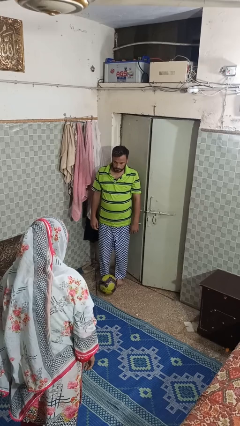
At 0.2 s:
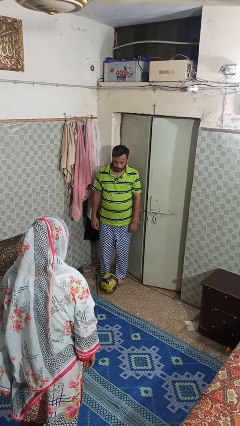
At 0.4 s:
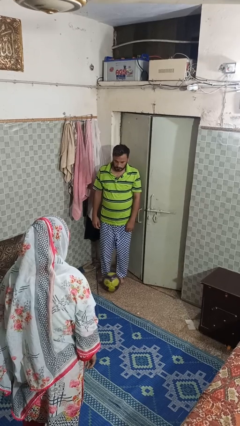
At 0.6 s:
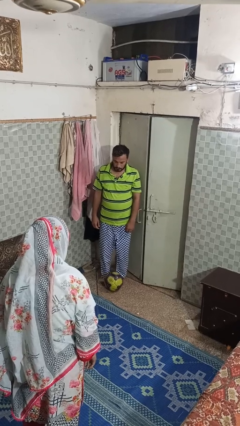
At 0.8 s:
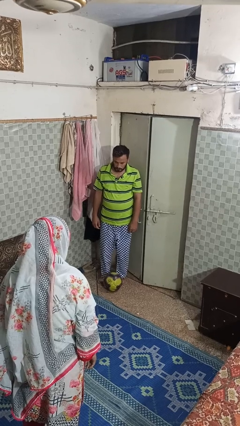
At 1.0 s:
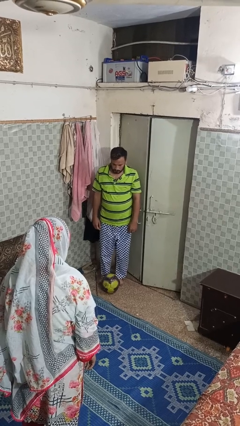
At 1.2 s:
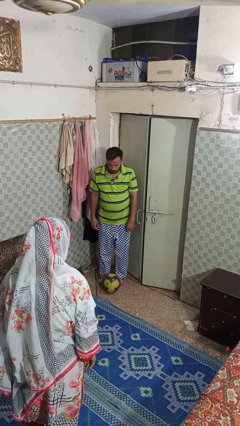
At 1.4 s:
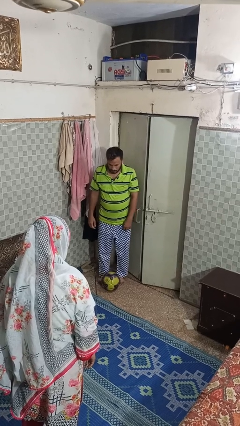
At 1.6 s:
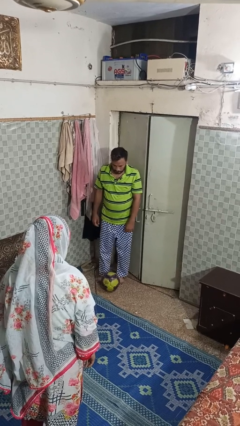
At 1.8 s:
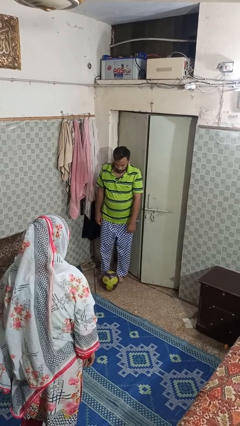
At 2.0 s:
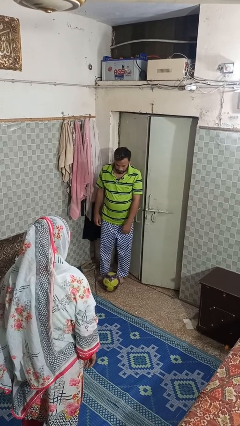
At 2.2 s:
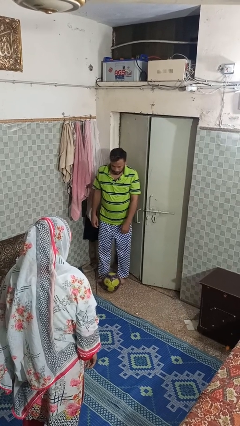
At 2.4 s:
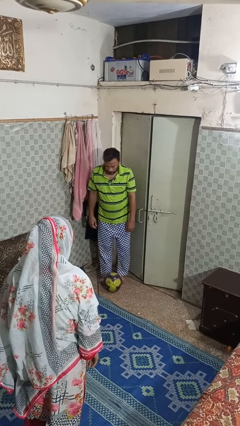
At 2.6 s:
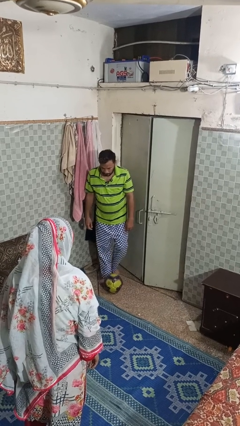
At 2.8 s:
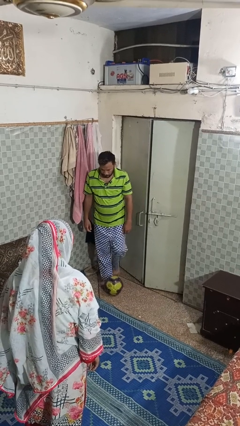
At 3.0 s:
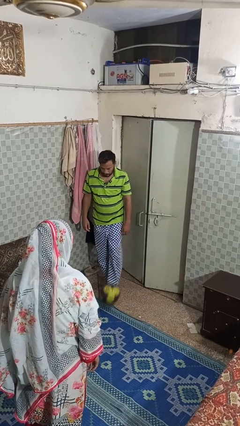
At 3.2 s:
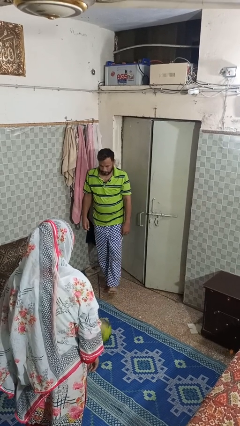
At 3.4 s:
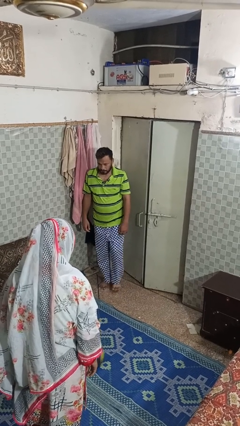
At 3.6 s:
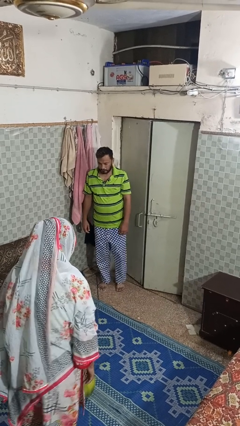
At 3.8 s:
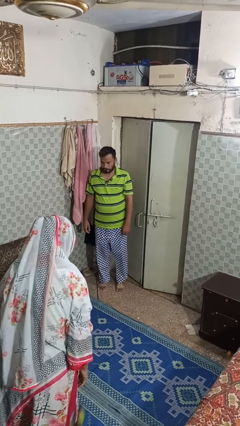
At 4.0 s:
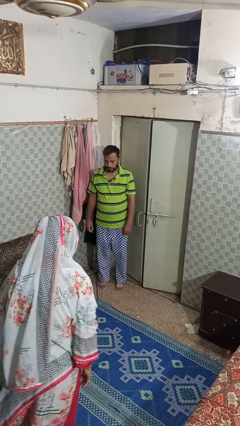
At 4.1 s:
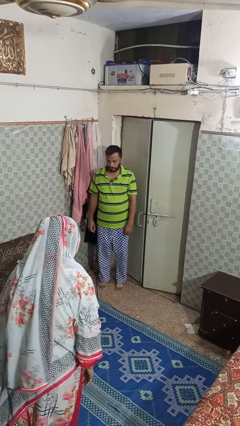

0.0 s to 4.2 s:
person kicks object to person

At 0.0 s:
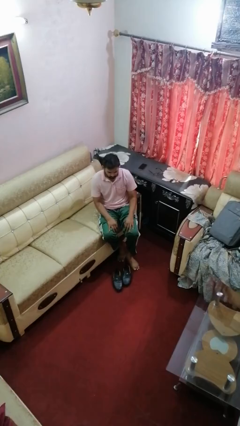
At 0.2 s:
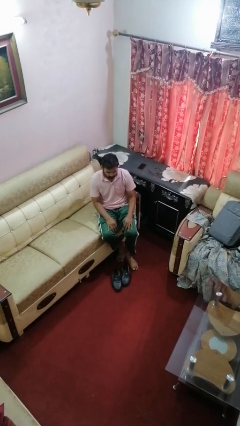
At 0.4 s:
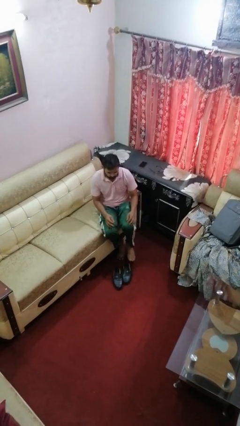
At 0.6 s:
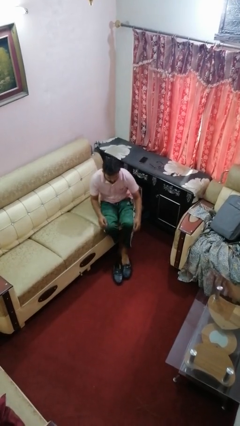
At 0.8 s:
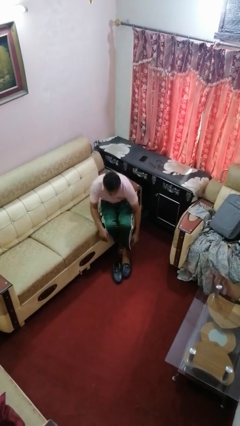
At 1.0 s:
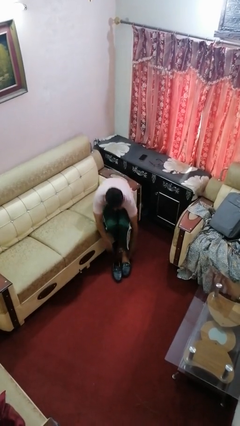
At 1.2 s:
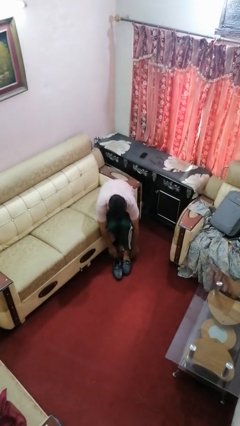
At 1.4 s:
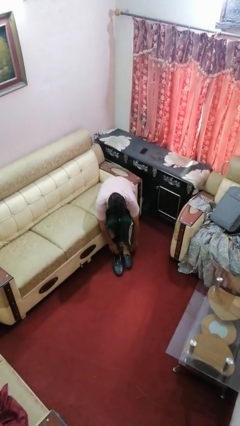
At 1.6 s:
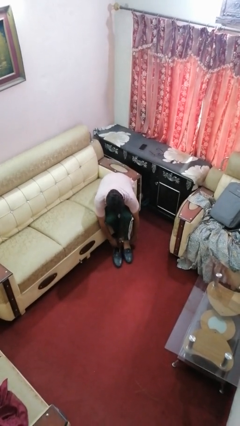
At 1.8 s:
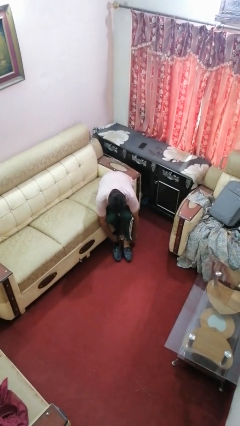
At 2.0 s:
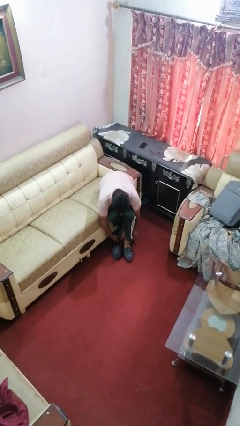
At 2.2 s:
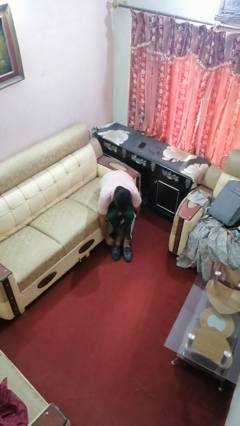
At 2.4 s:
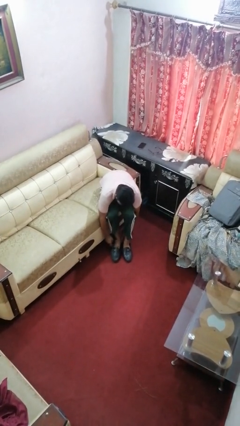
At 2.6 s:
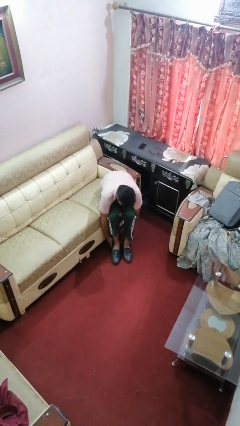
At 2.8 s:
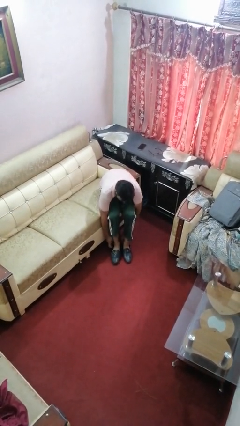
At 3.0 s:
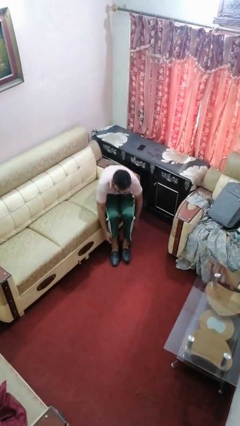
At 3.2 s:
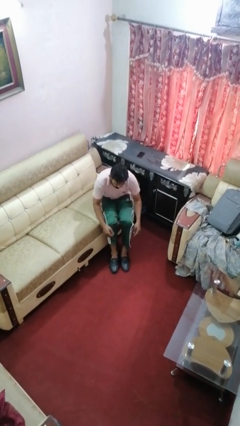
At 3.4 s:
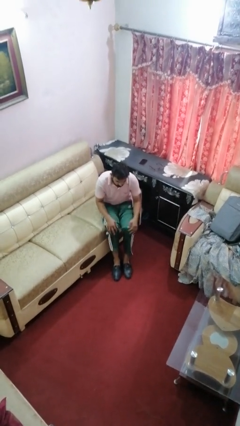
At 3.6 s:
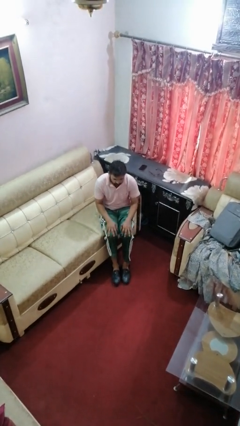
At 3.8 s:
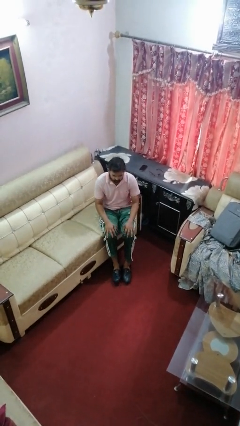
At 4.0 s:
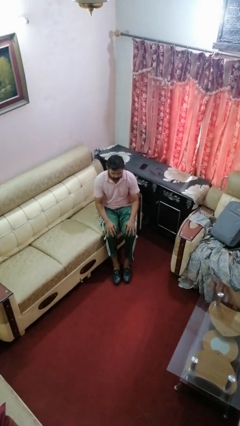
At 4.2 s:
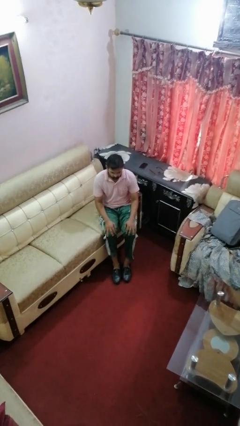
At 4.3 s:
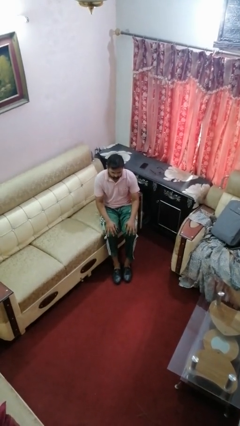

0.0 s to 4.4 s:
person puts on shoes

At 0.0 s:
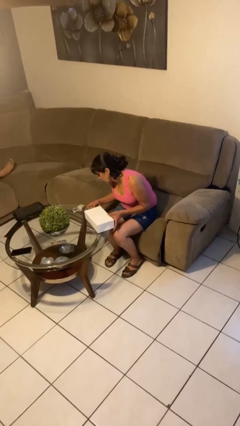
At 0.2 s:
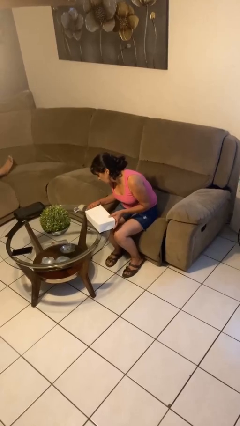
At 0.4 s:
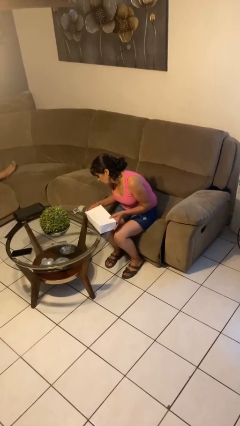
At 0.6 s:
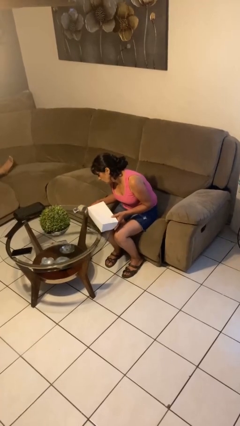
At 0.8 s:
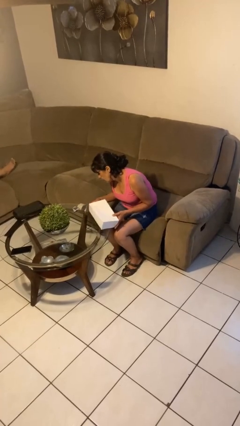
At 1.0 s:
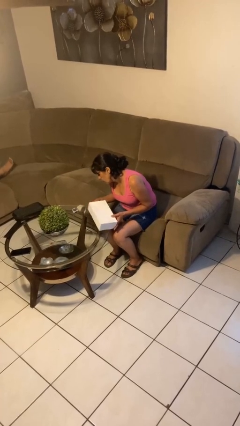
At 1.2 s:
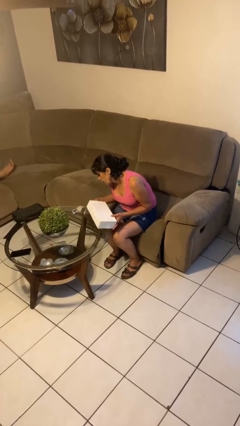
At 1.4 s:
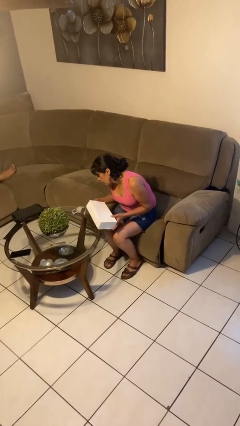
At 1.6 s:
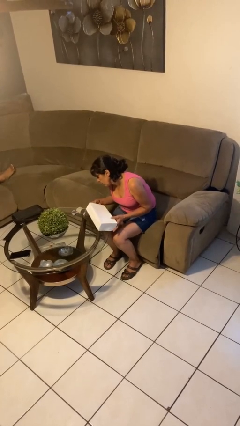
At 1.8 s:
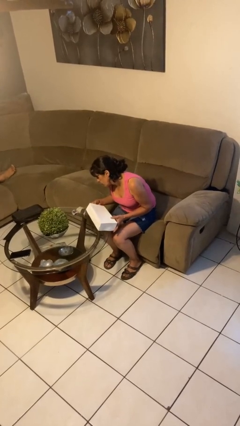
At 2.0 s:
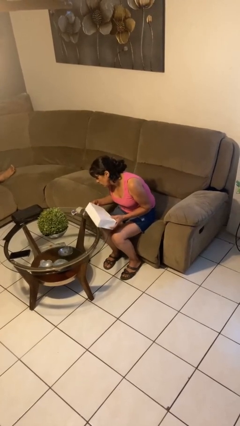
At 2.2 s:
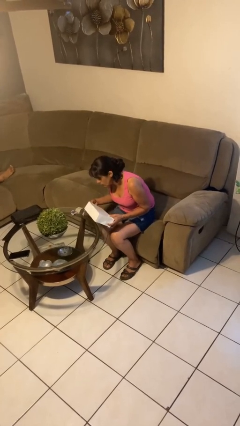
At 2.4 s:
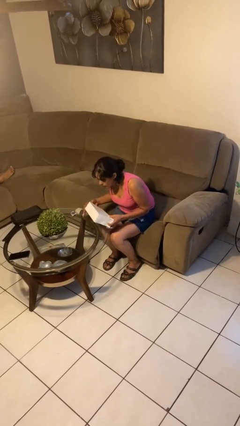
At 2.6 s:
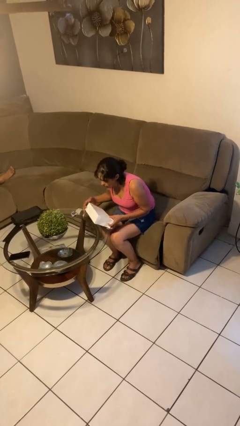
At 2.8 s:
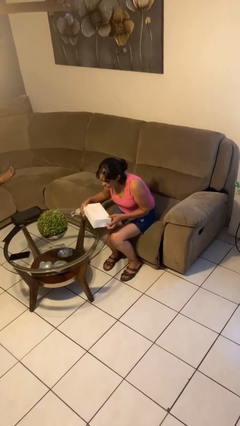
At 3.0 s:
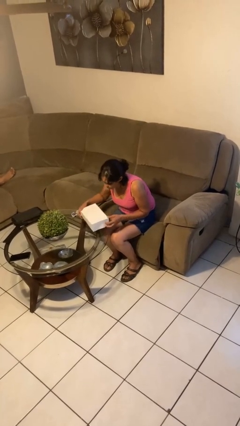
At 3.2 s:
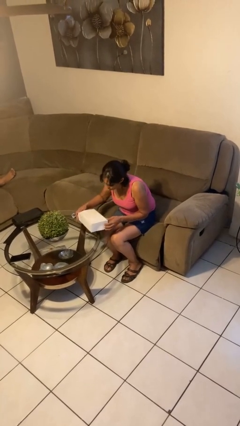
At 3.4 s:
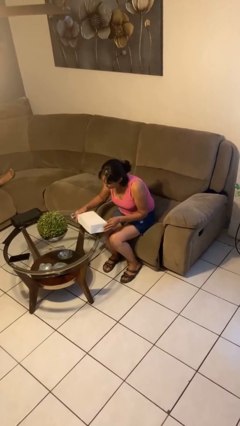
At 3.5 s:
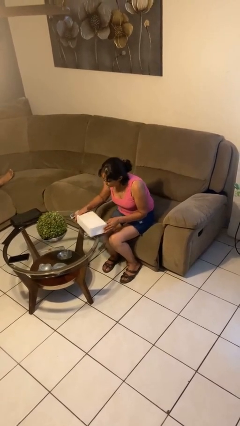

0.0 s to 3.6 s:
person wraps box

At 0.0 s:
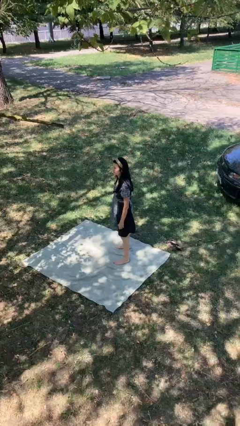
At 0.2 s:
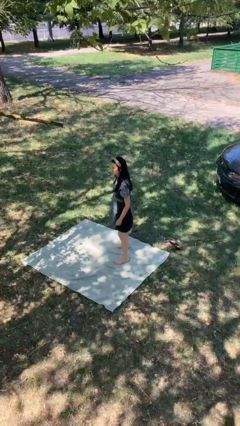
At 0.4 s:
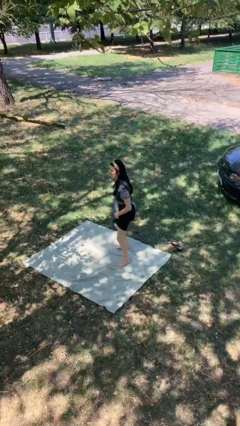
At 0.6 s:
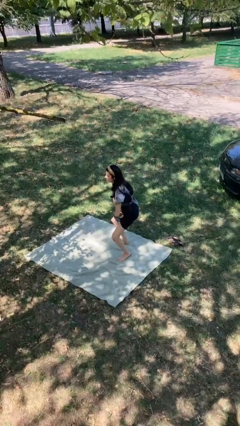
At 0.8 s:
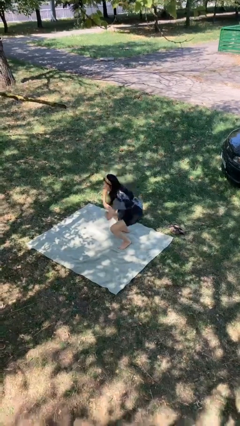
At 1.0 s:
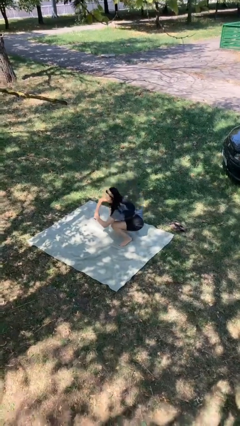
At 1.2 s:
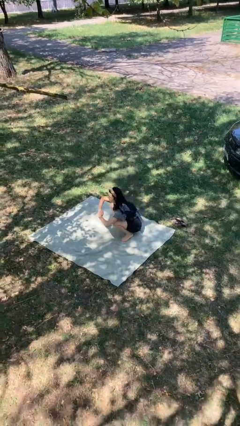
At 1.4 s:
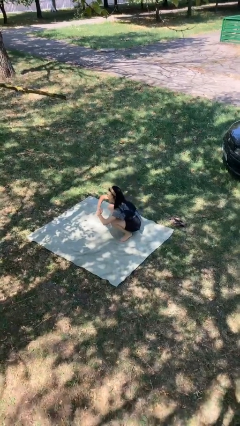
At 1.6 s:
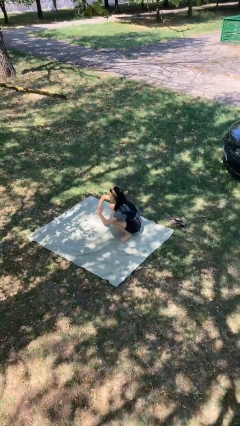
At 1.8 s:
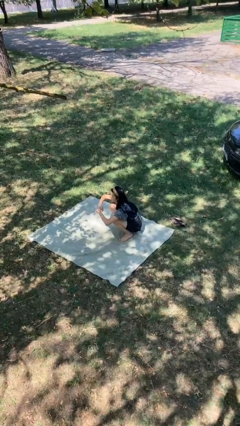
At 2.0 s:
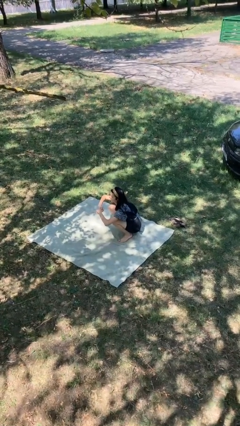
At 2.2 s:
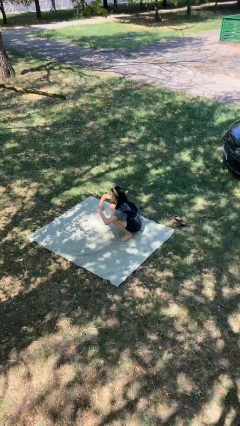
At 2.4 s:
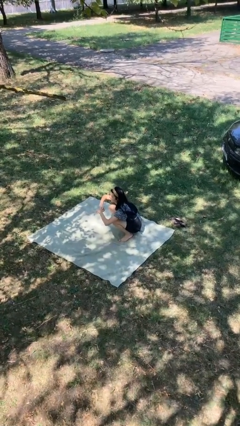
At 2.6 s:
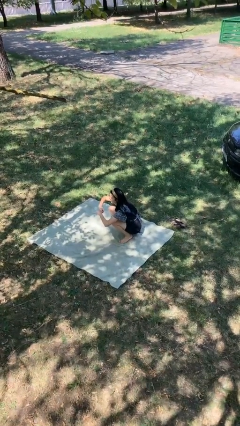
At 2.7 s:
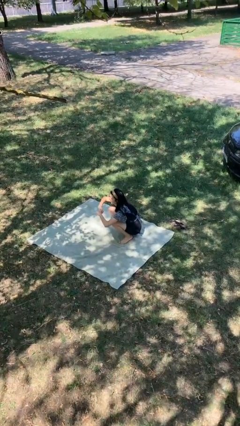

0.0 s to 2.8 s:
person squats

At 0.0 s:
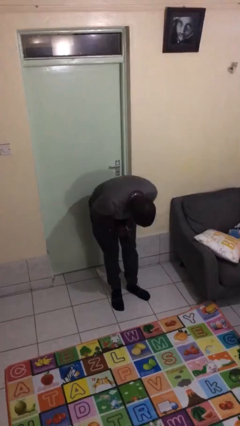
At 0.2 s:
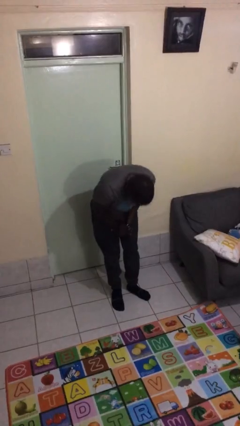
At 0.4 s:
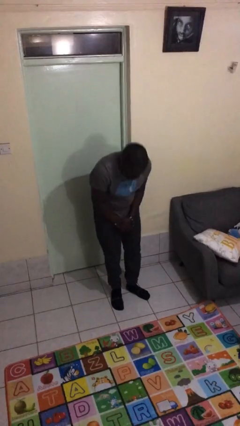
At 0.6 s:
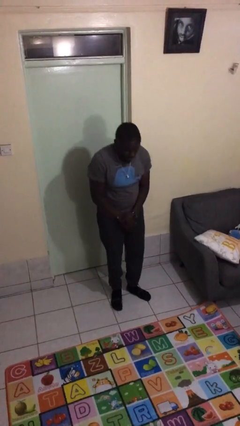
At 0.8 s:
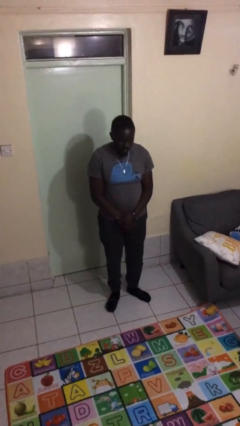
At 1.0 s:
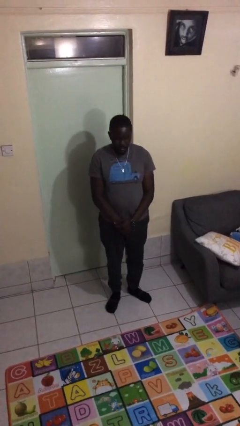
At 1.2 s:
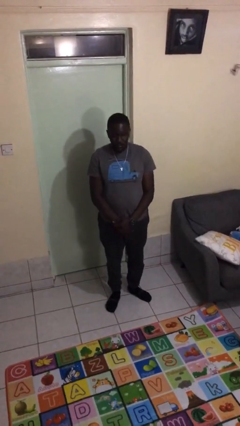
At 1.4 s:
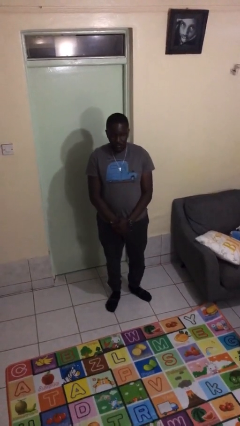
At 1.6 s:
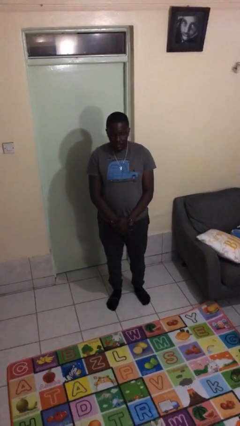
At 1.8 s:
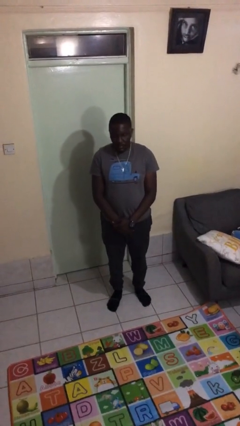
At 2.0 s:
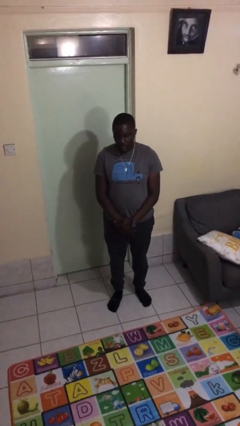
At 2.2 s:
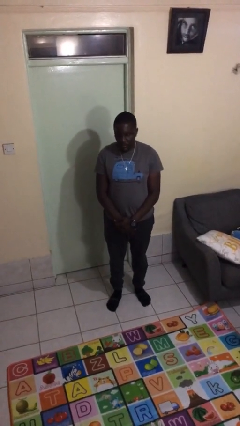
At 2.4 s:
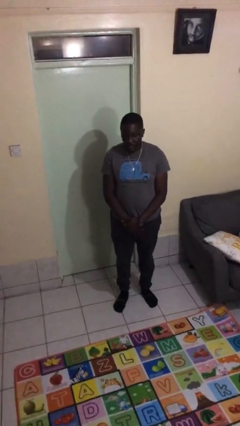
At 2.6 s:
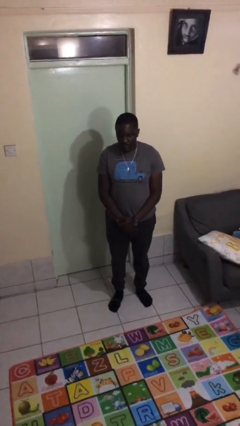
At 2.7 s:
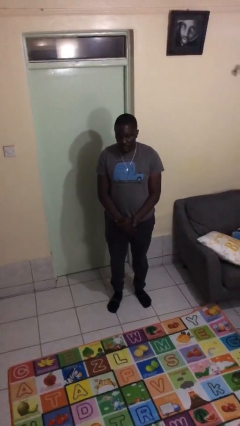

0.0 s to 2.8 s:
person bows
